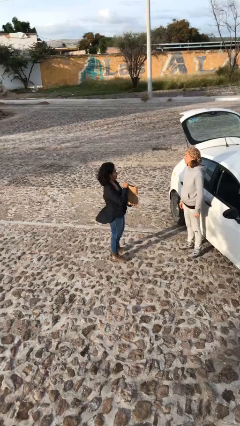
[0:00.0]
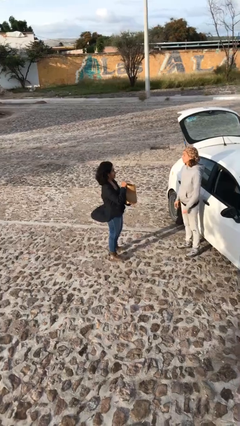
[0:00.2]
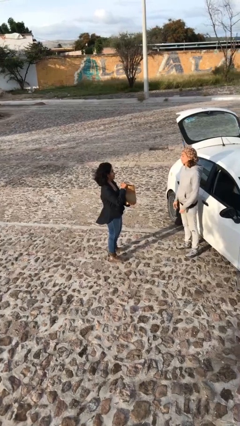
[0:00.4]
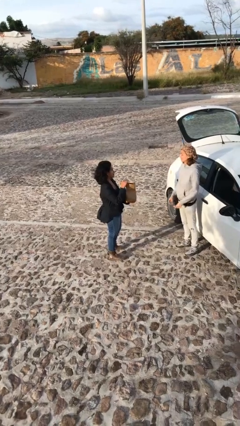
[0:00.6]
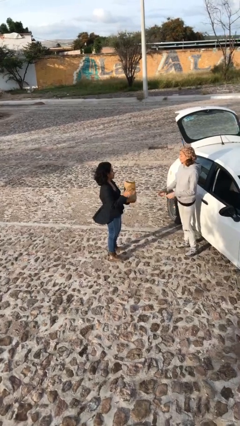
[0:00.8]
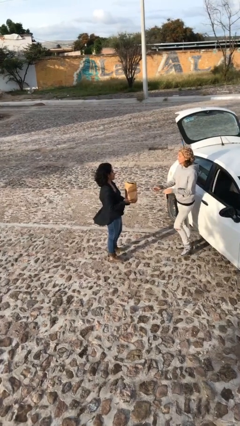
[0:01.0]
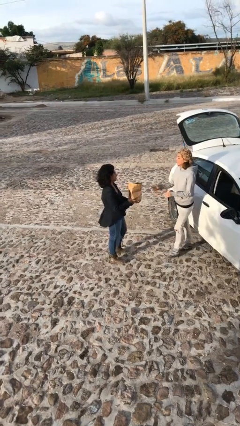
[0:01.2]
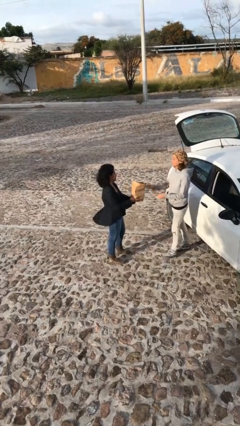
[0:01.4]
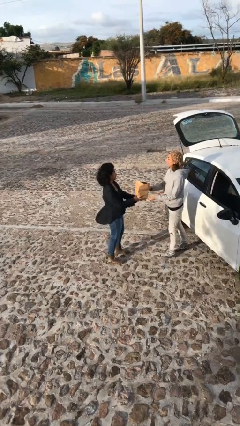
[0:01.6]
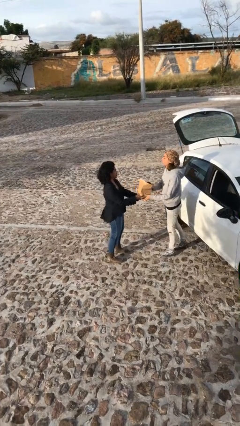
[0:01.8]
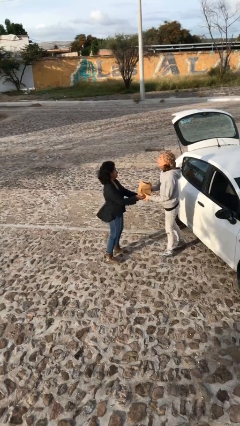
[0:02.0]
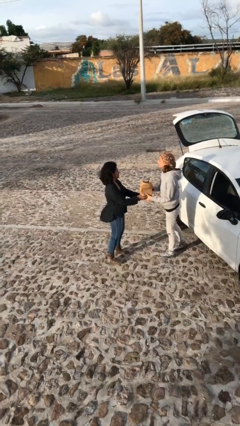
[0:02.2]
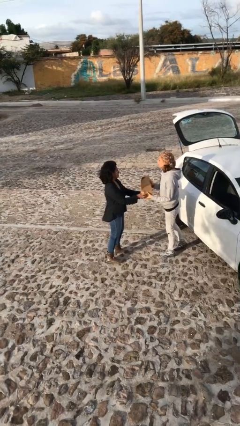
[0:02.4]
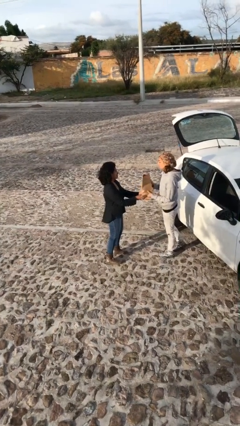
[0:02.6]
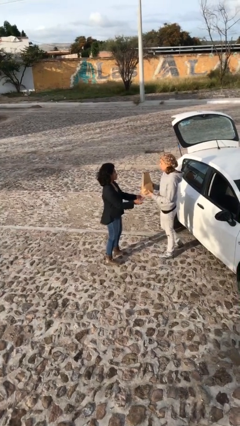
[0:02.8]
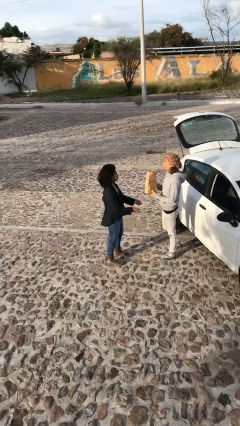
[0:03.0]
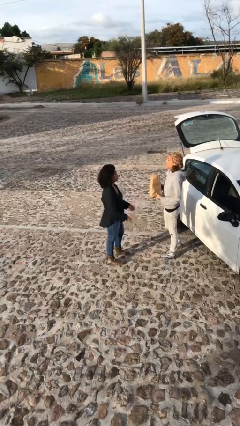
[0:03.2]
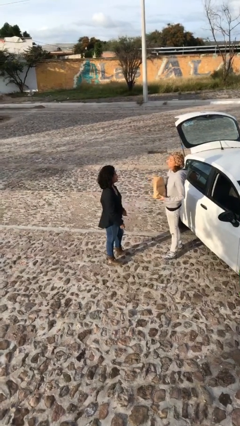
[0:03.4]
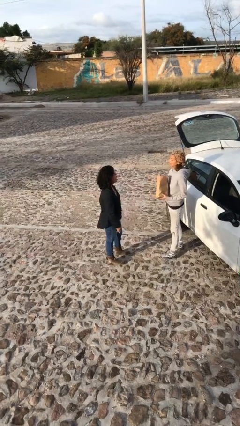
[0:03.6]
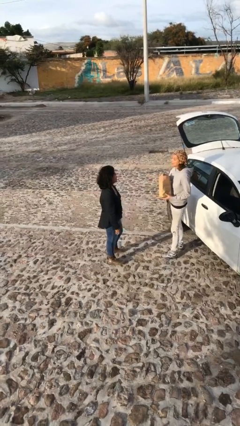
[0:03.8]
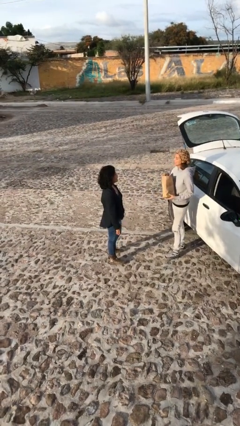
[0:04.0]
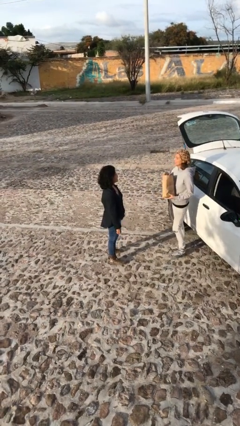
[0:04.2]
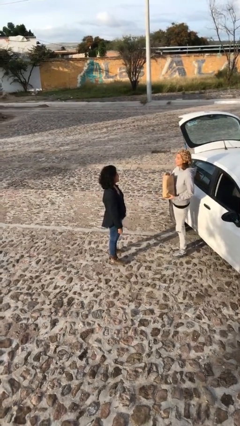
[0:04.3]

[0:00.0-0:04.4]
person transfers object to person

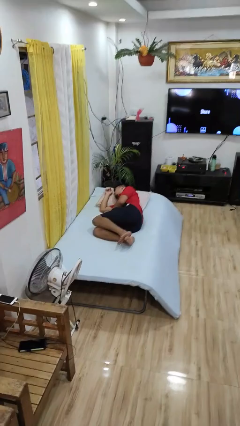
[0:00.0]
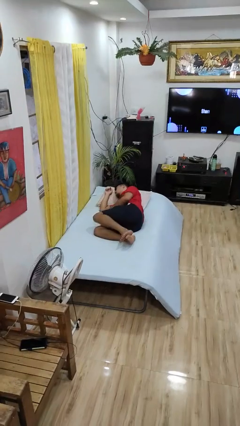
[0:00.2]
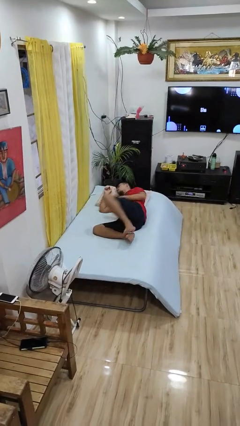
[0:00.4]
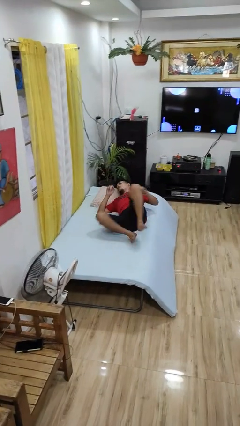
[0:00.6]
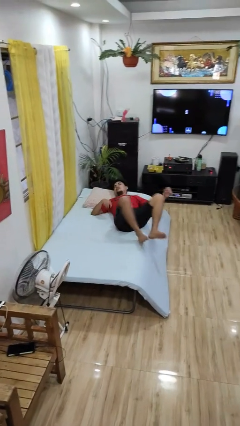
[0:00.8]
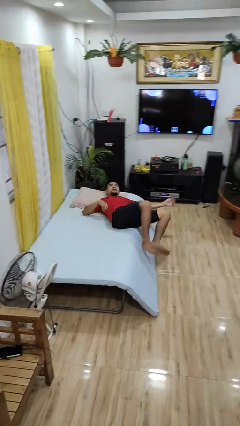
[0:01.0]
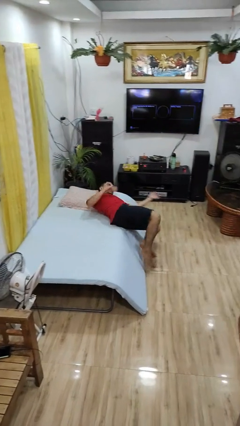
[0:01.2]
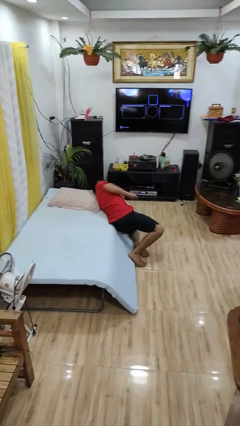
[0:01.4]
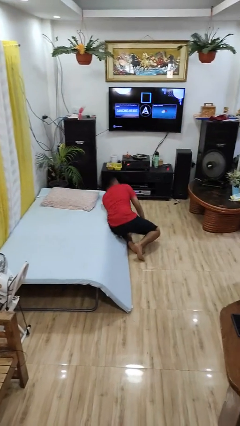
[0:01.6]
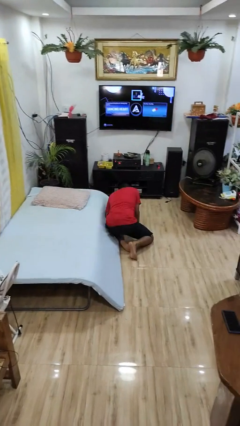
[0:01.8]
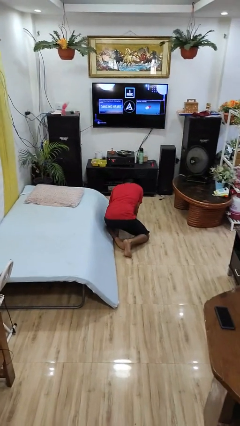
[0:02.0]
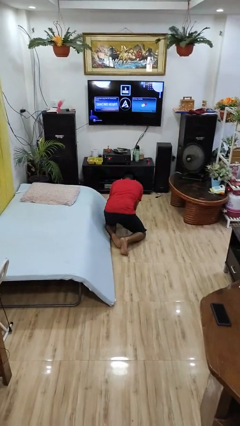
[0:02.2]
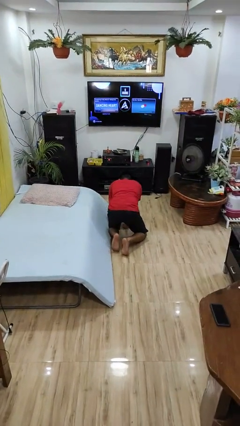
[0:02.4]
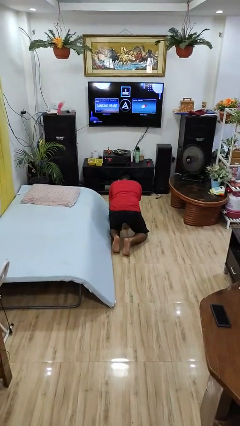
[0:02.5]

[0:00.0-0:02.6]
person falls from bed

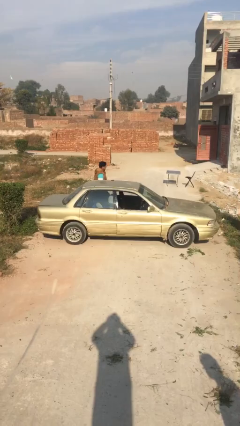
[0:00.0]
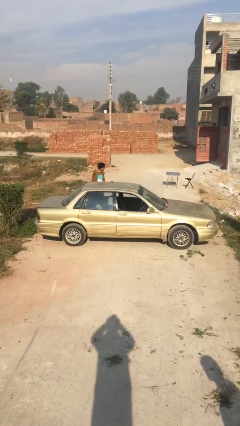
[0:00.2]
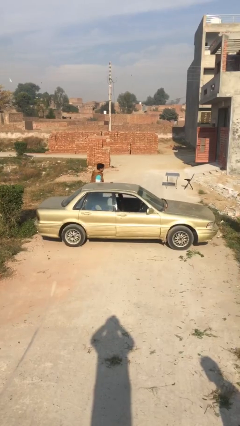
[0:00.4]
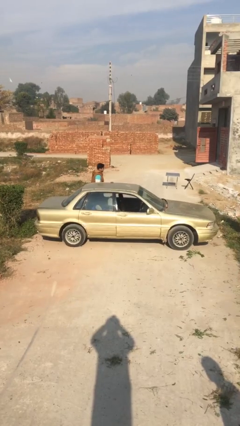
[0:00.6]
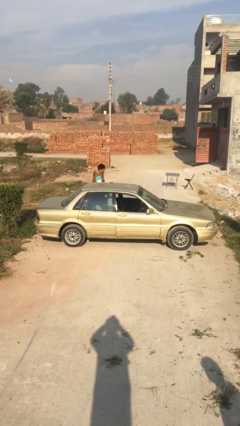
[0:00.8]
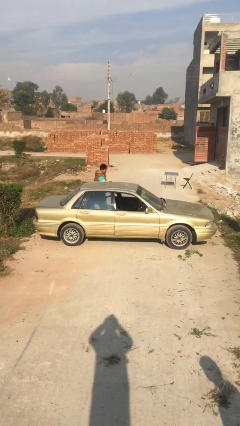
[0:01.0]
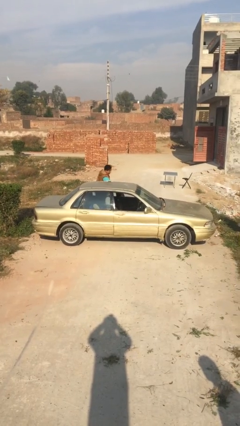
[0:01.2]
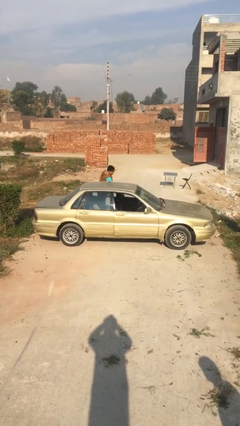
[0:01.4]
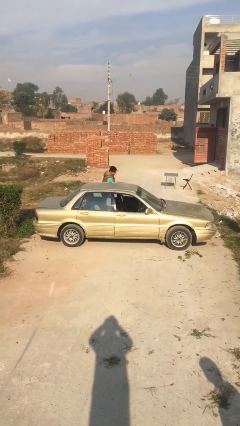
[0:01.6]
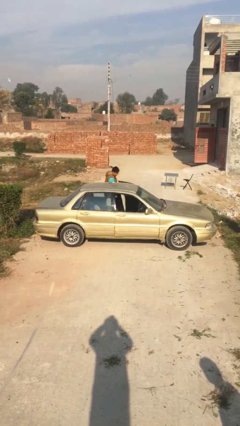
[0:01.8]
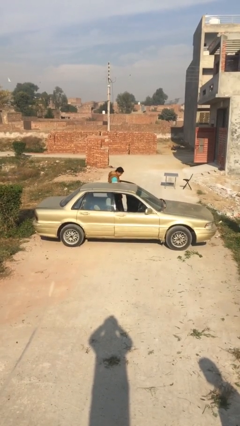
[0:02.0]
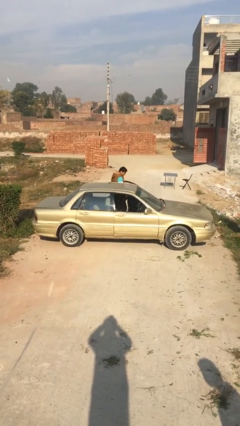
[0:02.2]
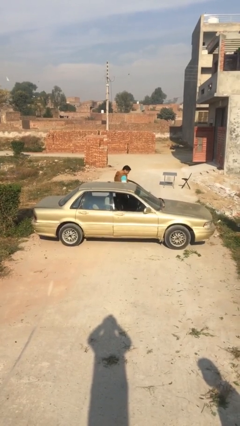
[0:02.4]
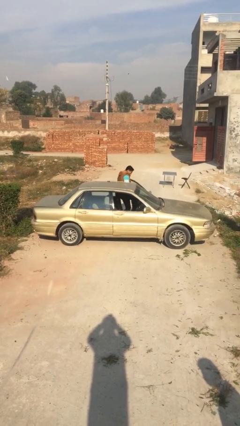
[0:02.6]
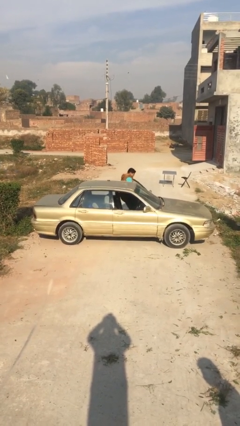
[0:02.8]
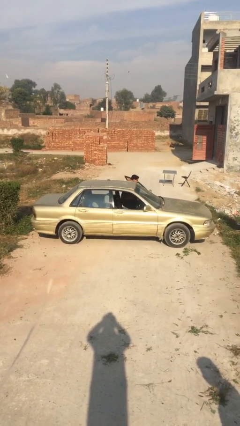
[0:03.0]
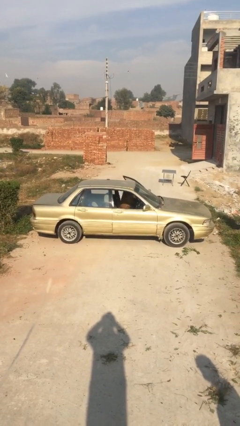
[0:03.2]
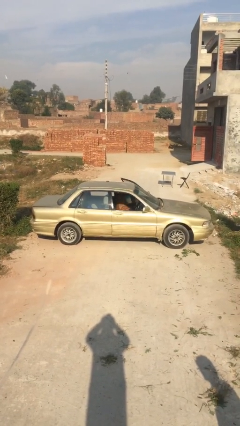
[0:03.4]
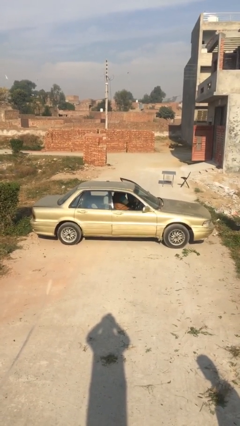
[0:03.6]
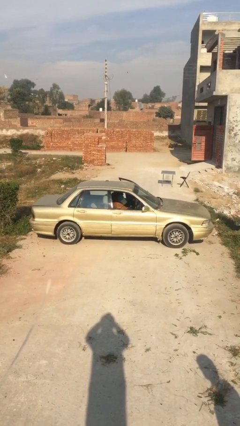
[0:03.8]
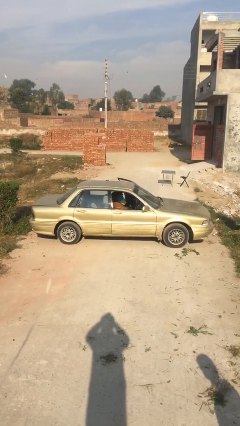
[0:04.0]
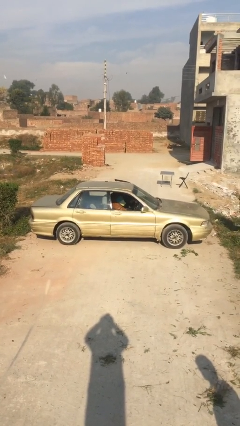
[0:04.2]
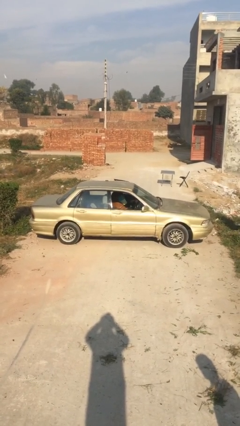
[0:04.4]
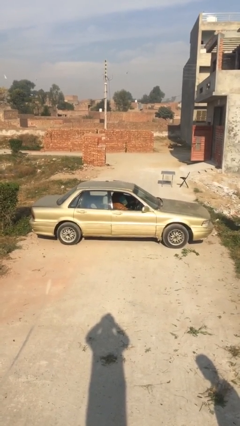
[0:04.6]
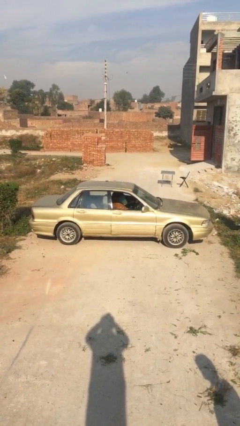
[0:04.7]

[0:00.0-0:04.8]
car picks up person

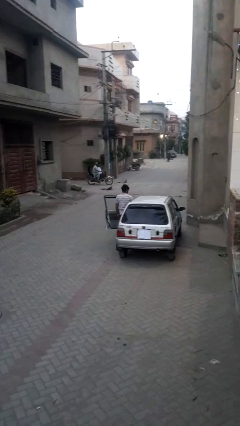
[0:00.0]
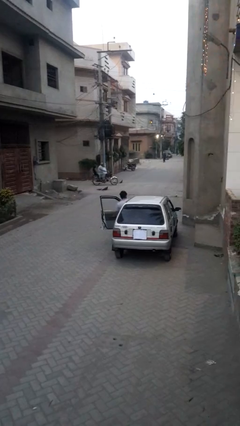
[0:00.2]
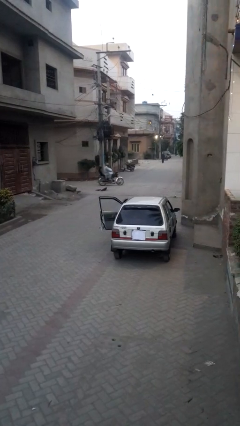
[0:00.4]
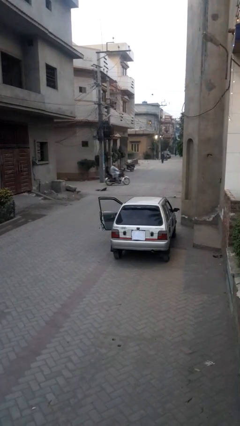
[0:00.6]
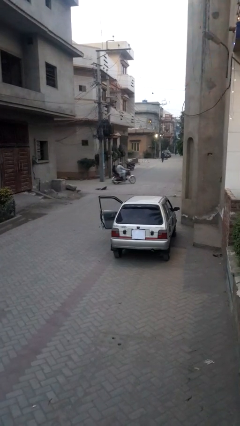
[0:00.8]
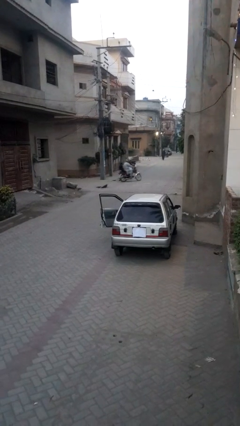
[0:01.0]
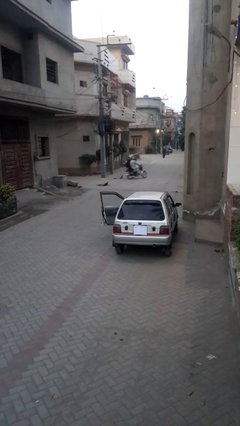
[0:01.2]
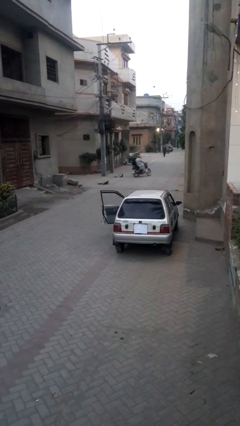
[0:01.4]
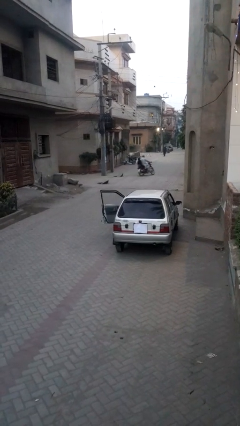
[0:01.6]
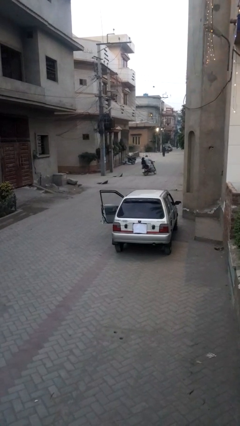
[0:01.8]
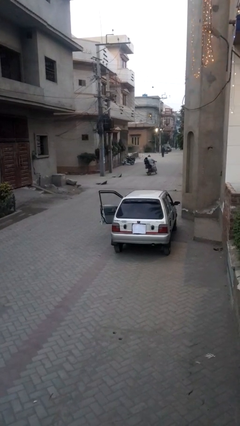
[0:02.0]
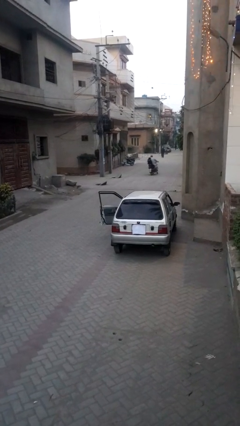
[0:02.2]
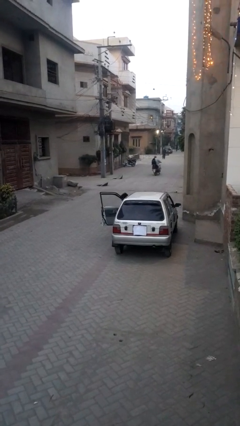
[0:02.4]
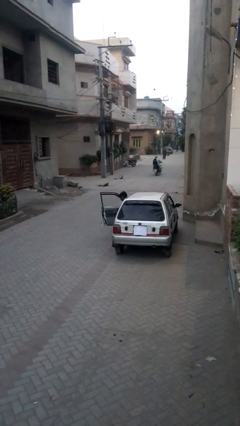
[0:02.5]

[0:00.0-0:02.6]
person enters car

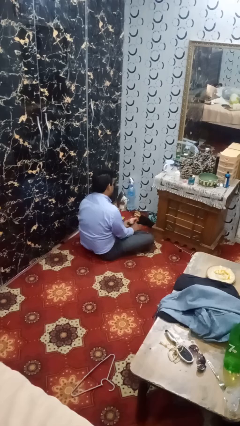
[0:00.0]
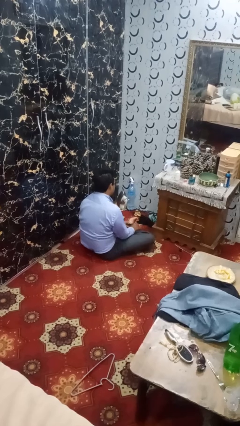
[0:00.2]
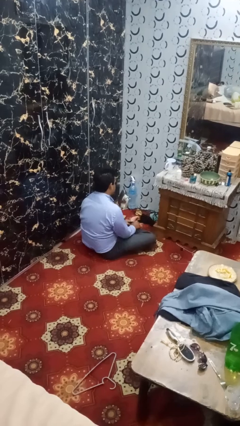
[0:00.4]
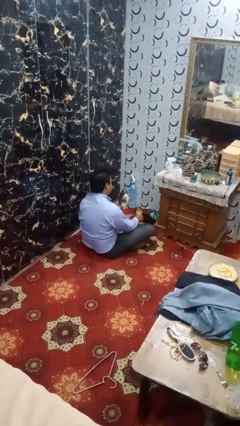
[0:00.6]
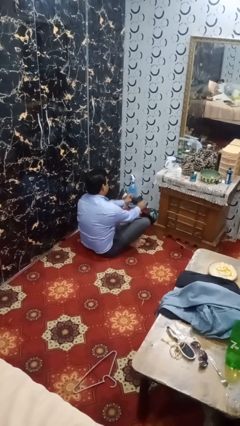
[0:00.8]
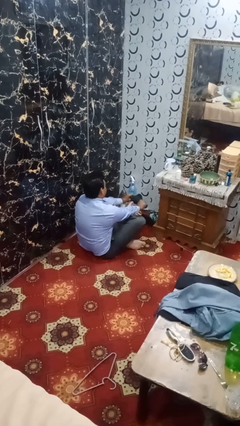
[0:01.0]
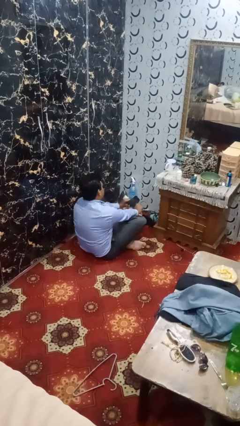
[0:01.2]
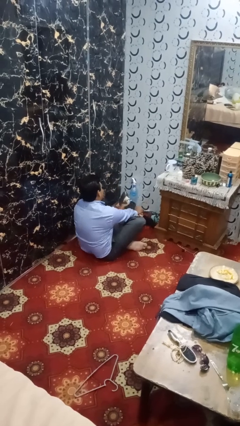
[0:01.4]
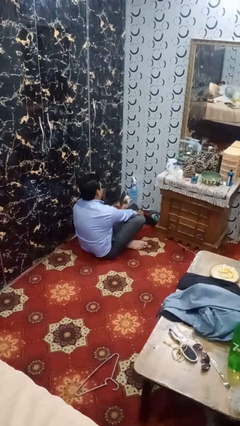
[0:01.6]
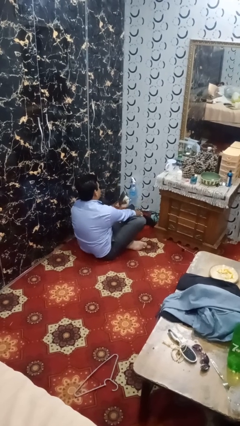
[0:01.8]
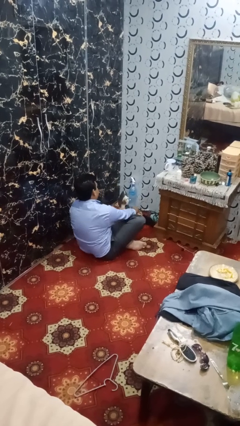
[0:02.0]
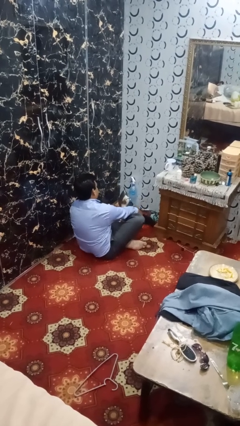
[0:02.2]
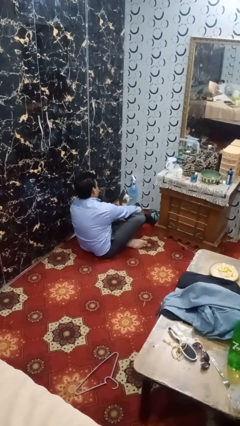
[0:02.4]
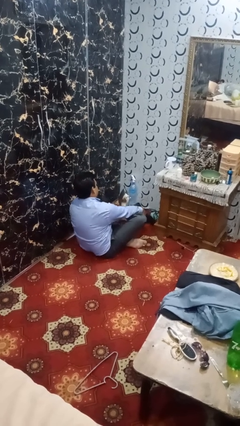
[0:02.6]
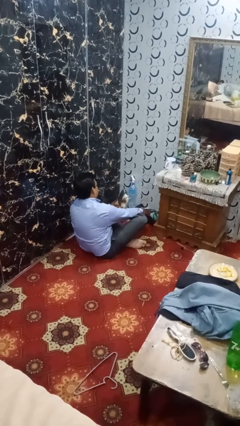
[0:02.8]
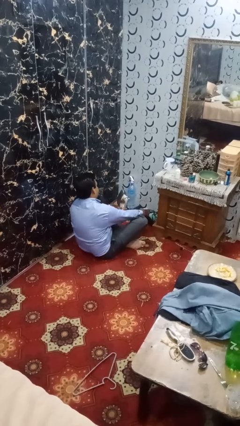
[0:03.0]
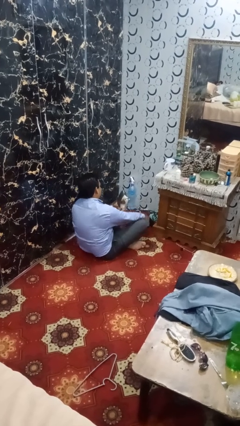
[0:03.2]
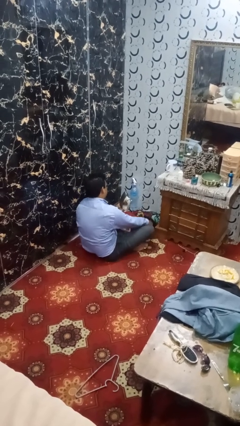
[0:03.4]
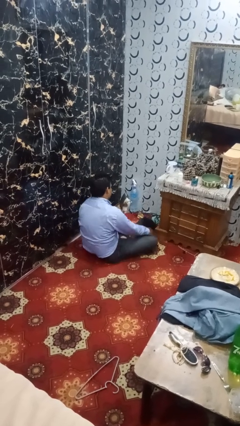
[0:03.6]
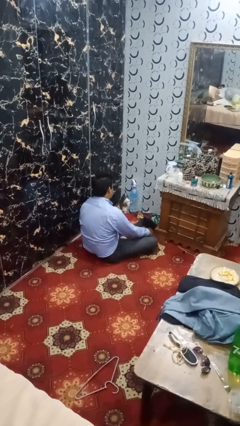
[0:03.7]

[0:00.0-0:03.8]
person puts on socks
